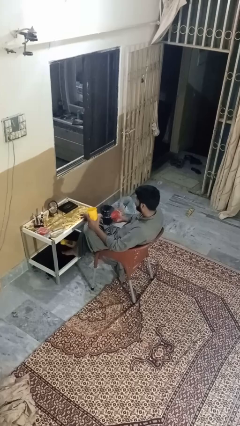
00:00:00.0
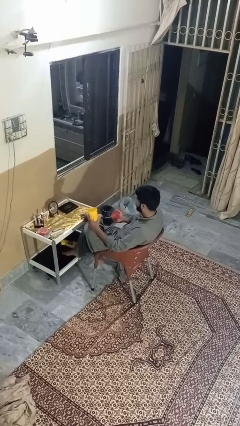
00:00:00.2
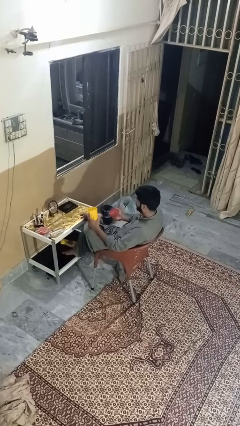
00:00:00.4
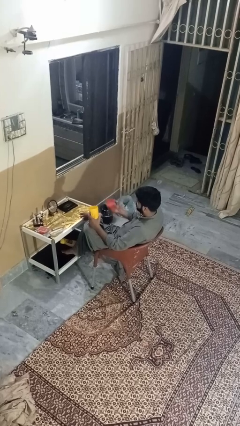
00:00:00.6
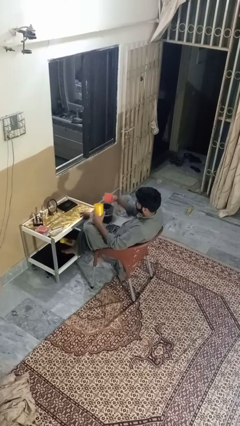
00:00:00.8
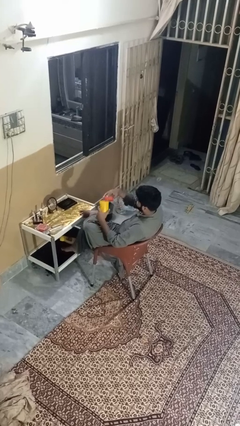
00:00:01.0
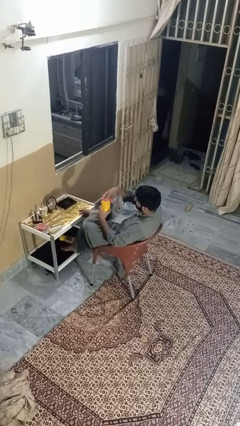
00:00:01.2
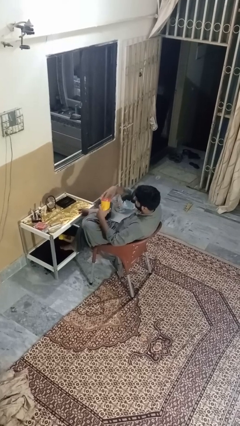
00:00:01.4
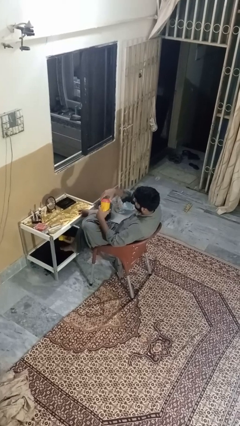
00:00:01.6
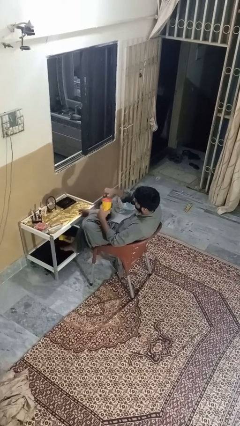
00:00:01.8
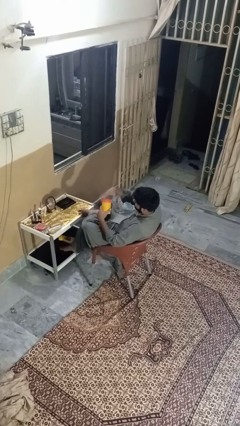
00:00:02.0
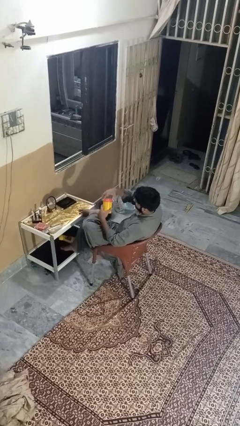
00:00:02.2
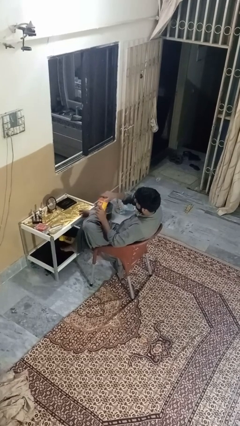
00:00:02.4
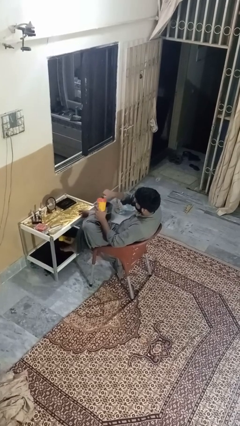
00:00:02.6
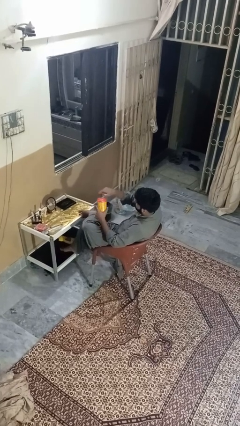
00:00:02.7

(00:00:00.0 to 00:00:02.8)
person closes jar

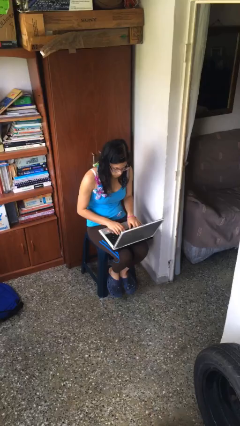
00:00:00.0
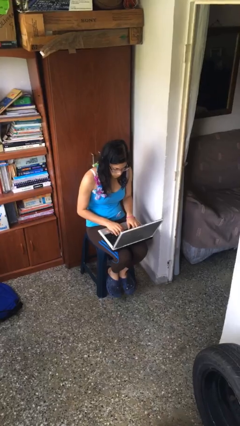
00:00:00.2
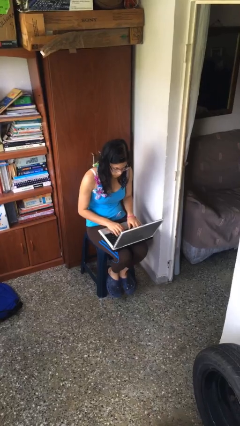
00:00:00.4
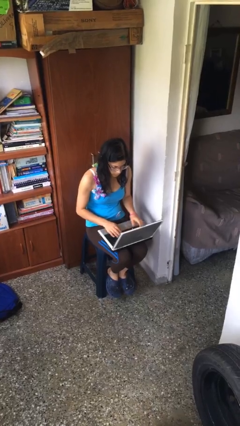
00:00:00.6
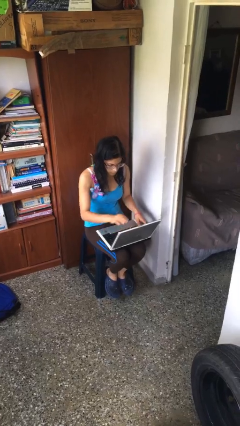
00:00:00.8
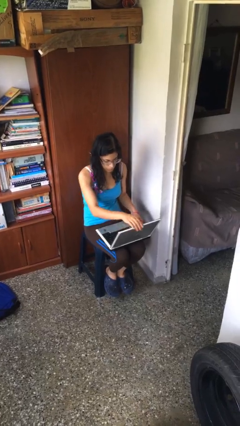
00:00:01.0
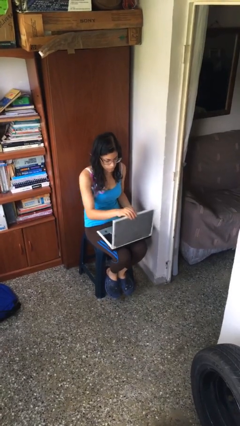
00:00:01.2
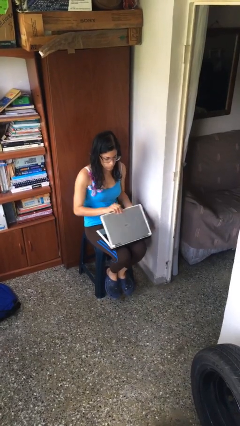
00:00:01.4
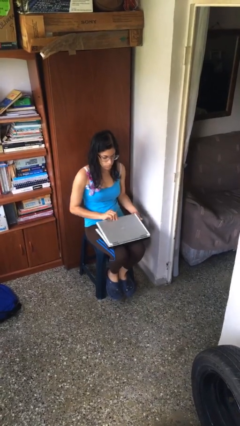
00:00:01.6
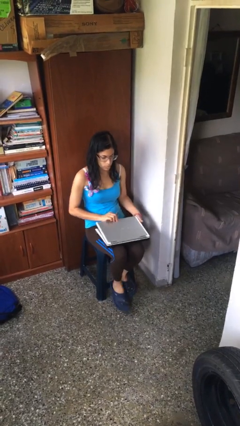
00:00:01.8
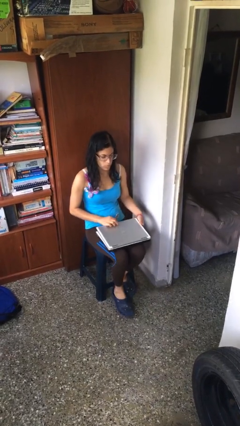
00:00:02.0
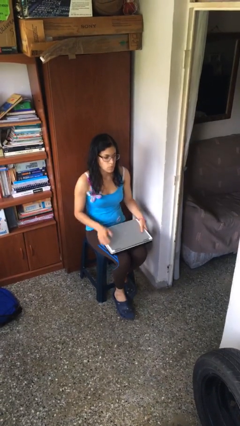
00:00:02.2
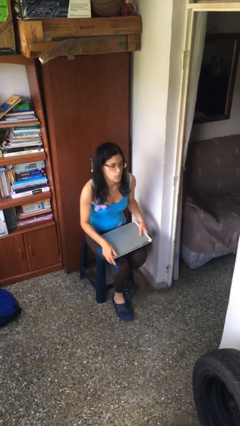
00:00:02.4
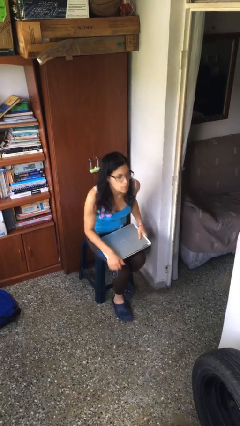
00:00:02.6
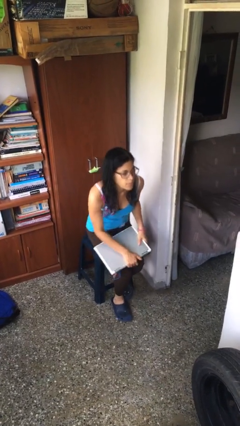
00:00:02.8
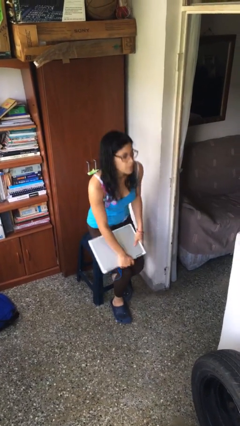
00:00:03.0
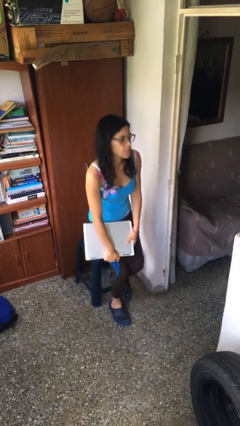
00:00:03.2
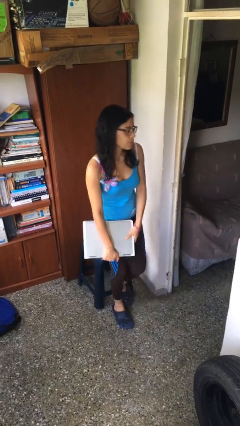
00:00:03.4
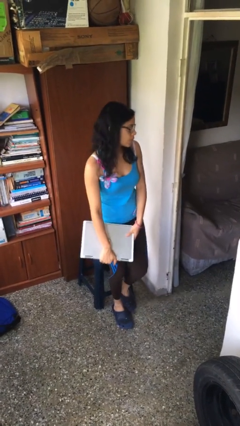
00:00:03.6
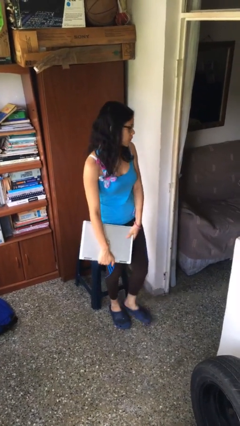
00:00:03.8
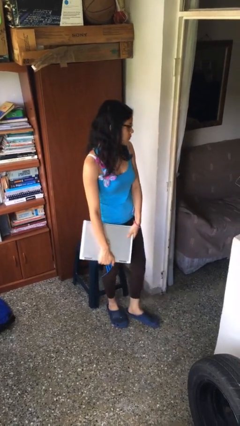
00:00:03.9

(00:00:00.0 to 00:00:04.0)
person stands up

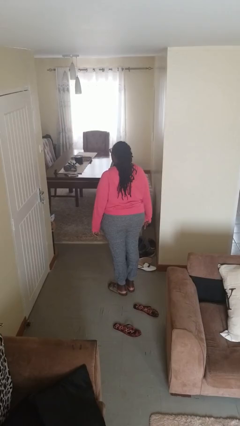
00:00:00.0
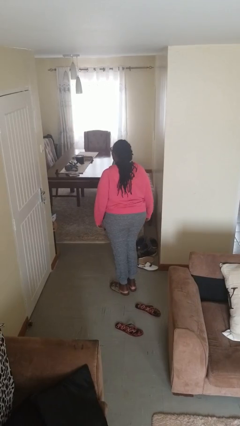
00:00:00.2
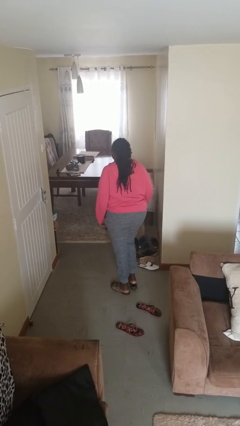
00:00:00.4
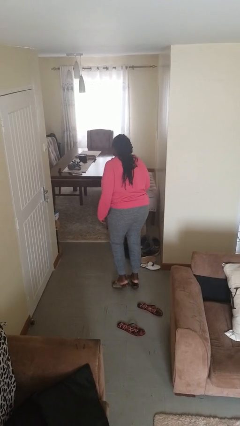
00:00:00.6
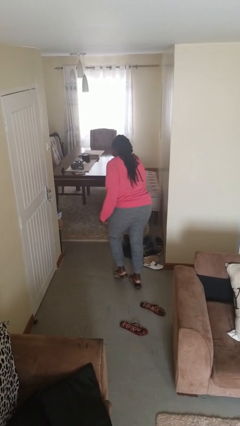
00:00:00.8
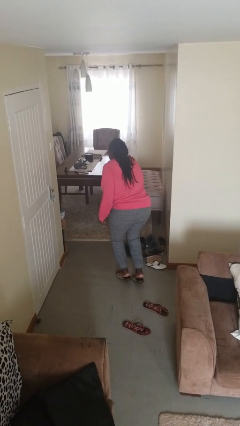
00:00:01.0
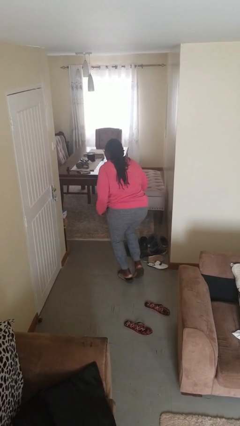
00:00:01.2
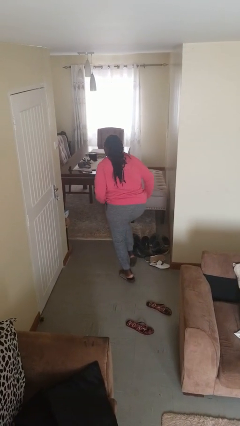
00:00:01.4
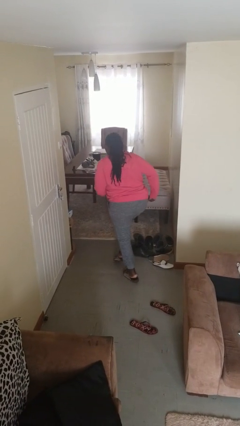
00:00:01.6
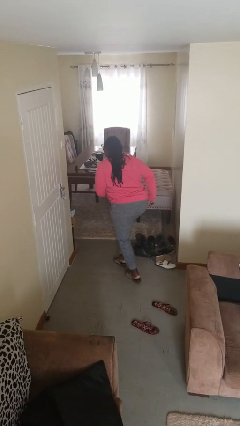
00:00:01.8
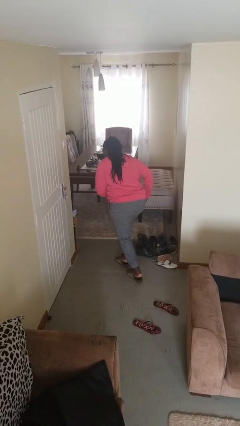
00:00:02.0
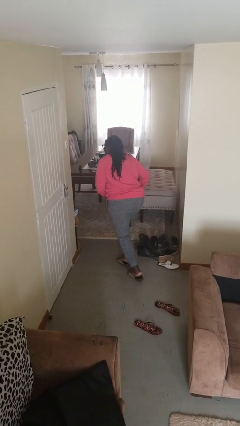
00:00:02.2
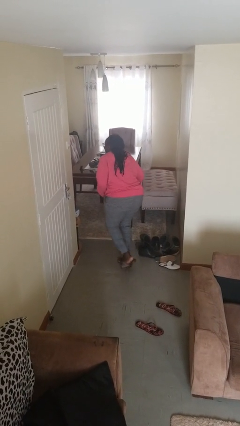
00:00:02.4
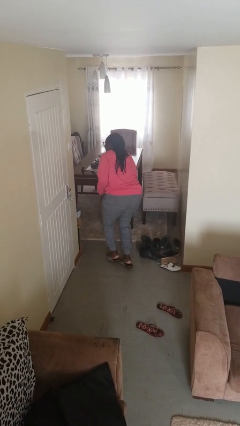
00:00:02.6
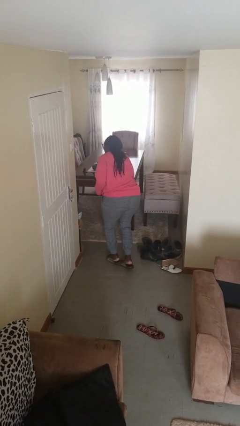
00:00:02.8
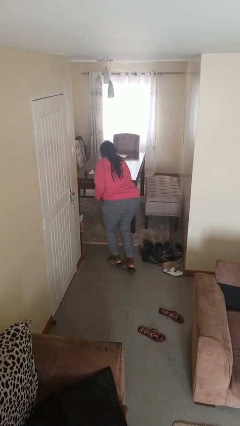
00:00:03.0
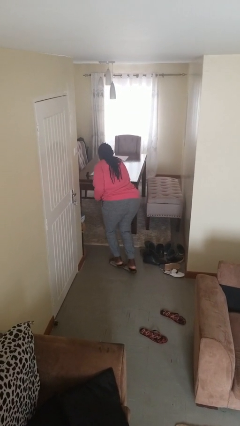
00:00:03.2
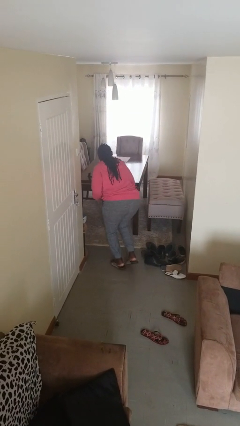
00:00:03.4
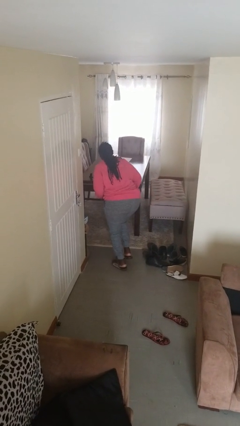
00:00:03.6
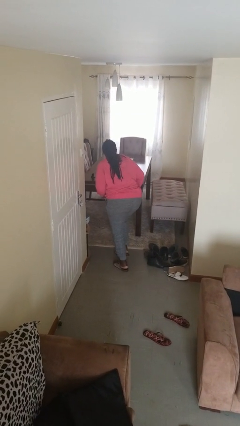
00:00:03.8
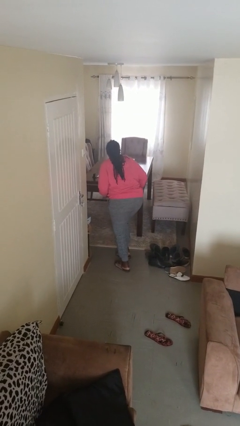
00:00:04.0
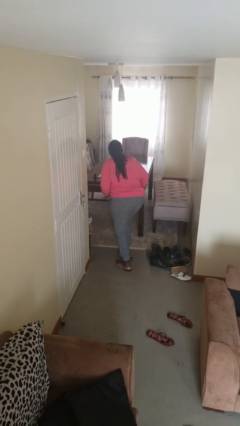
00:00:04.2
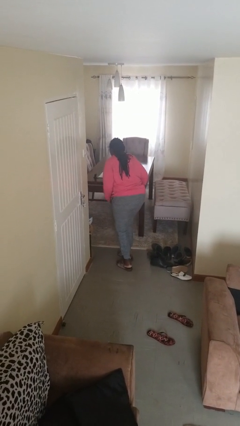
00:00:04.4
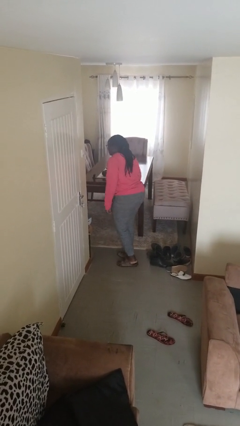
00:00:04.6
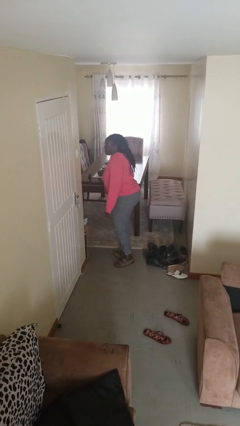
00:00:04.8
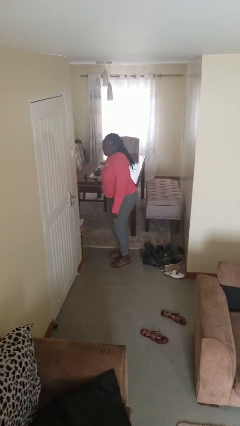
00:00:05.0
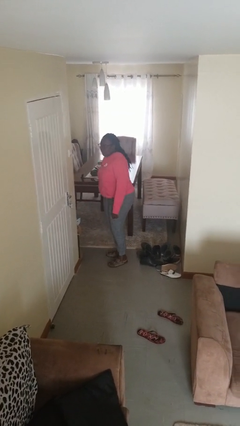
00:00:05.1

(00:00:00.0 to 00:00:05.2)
person walks tiptoe

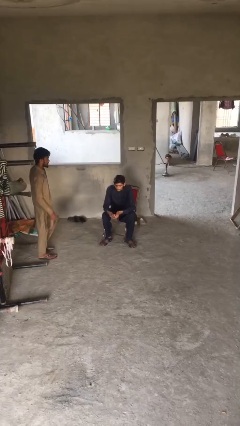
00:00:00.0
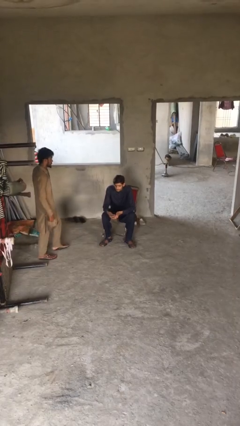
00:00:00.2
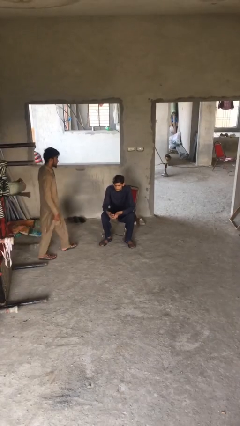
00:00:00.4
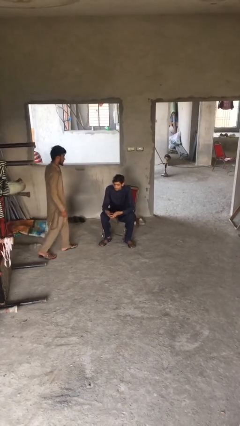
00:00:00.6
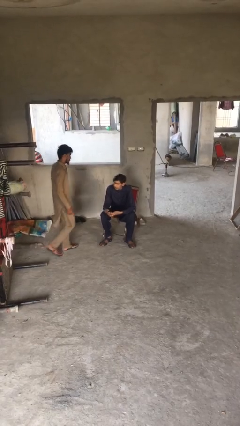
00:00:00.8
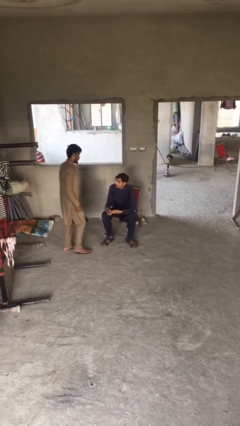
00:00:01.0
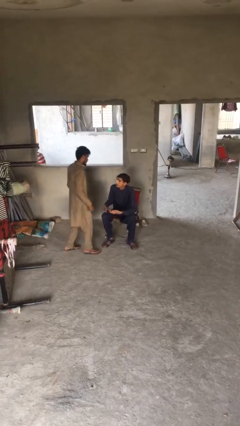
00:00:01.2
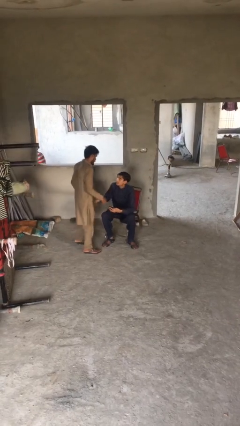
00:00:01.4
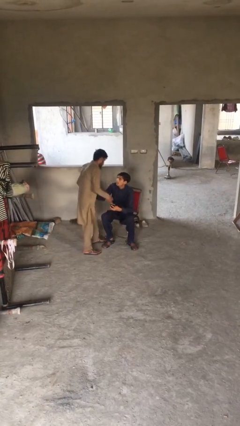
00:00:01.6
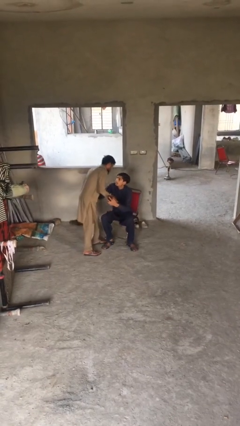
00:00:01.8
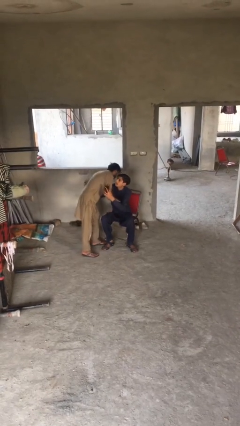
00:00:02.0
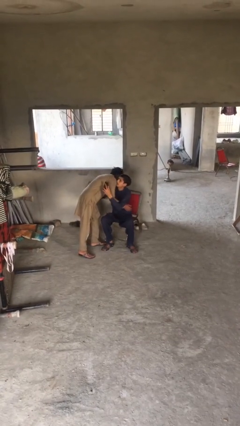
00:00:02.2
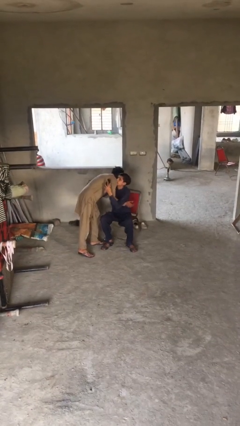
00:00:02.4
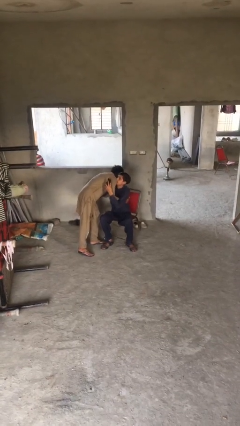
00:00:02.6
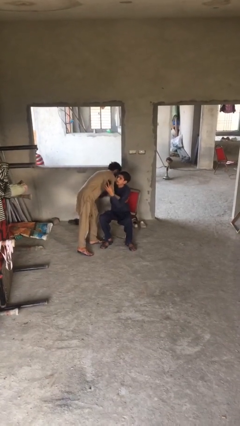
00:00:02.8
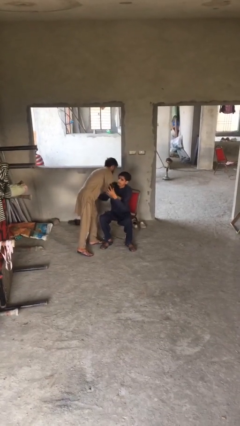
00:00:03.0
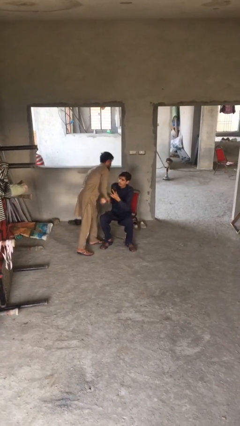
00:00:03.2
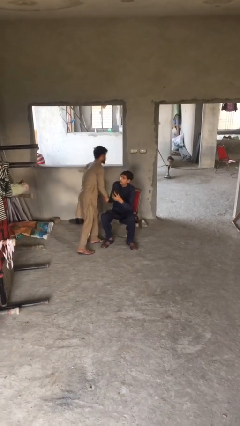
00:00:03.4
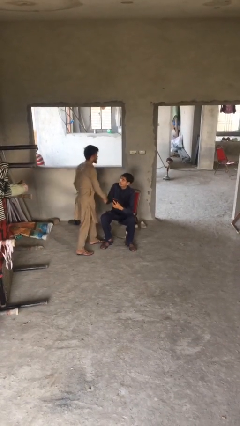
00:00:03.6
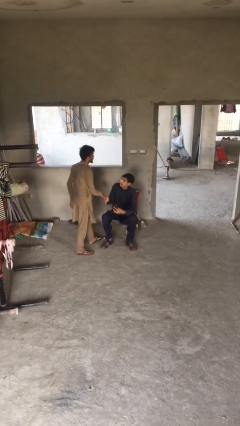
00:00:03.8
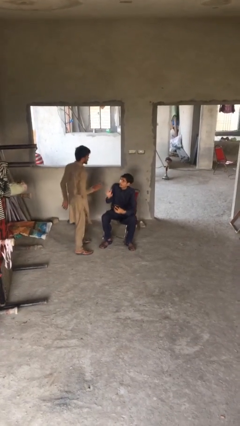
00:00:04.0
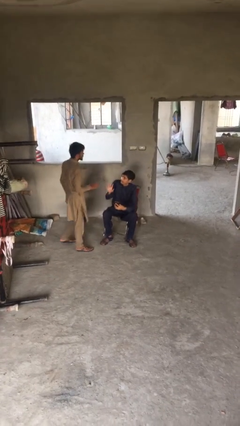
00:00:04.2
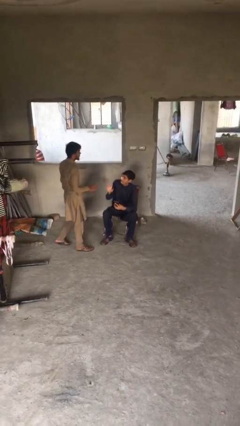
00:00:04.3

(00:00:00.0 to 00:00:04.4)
person embraces person

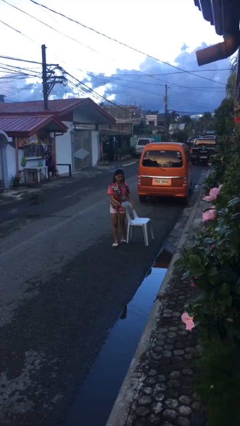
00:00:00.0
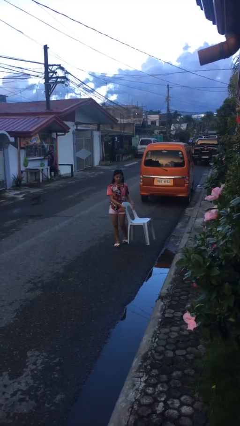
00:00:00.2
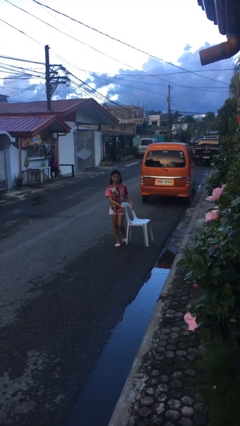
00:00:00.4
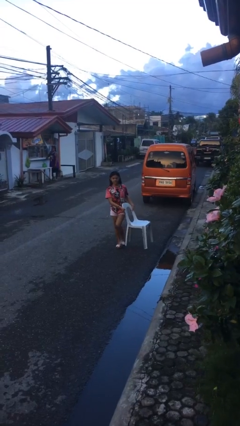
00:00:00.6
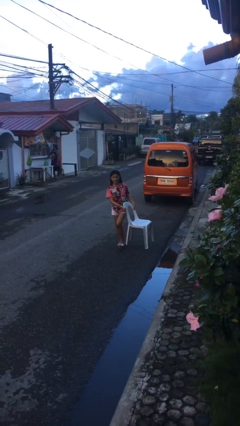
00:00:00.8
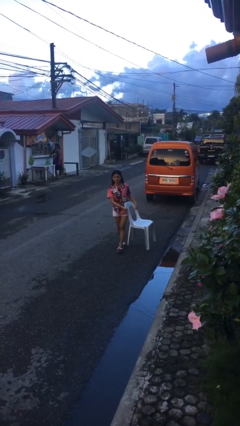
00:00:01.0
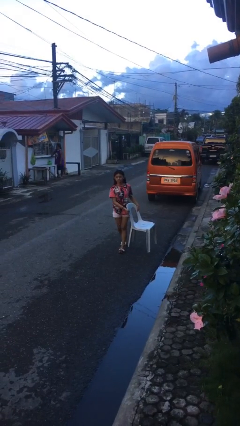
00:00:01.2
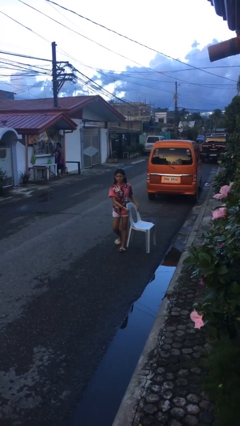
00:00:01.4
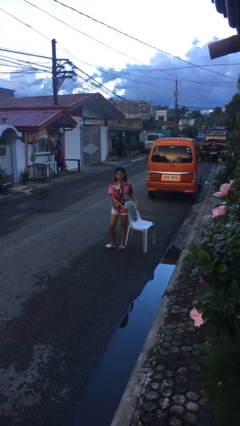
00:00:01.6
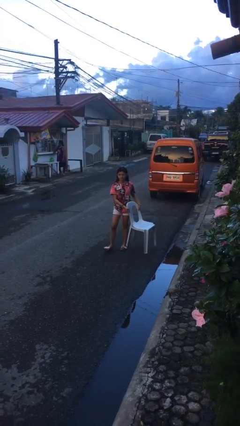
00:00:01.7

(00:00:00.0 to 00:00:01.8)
person carries heavy object
